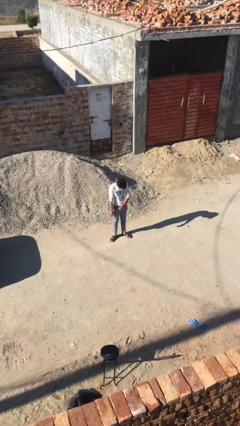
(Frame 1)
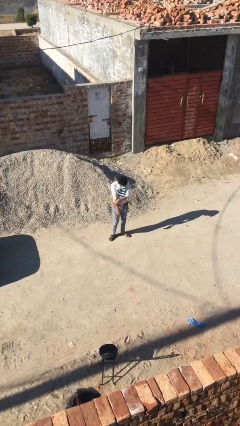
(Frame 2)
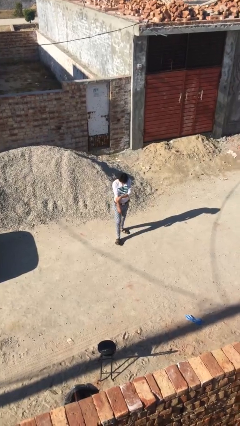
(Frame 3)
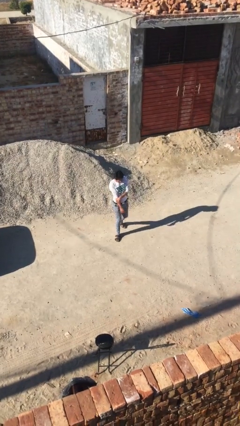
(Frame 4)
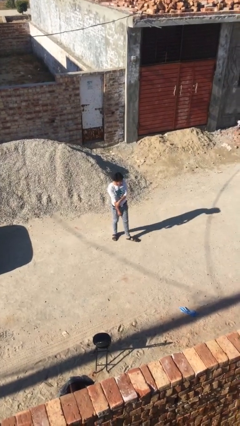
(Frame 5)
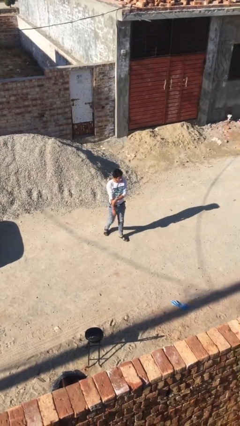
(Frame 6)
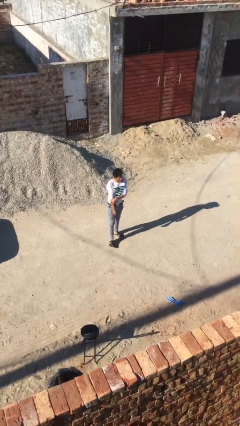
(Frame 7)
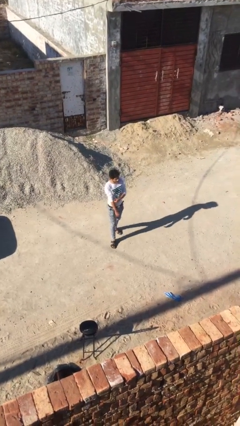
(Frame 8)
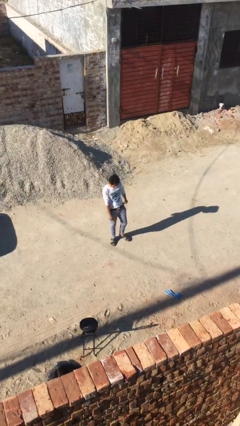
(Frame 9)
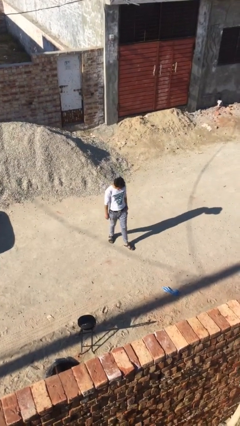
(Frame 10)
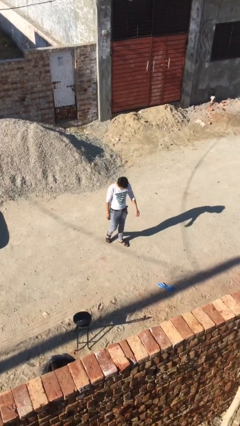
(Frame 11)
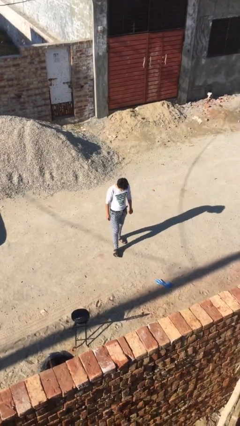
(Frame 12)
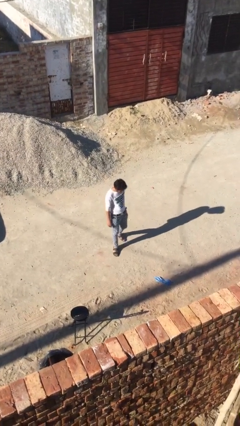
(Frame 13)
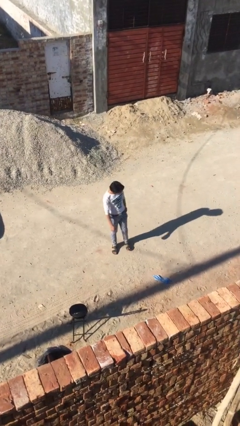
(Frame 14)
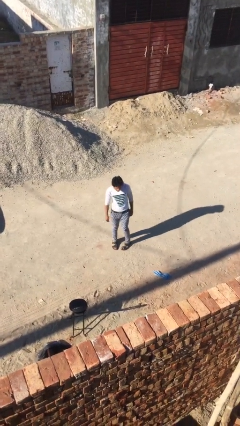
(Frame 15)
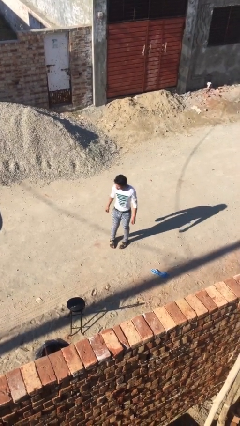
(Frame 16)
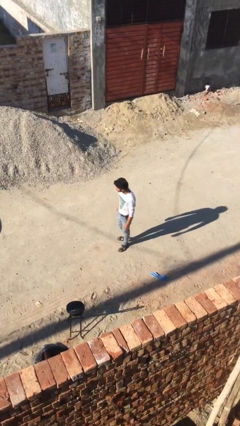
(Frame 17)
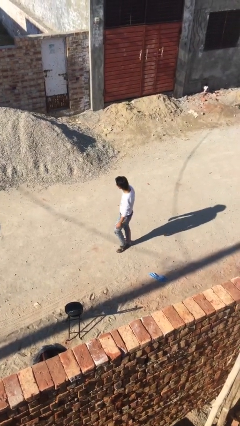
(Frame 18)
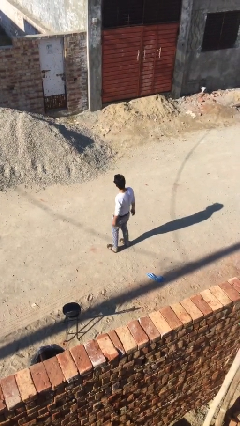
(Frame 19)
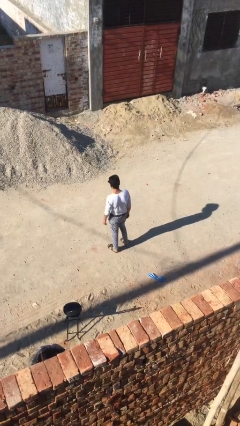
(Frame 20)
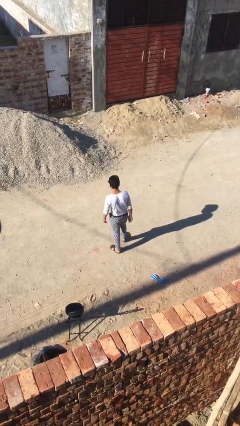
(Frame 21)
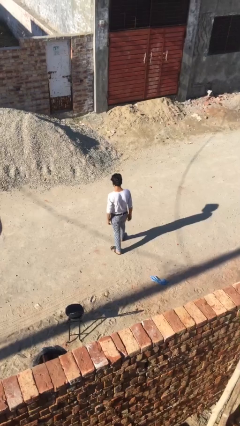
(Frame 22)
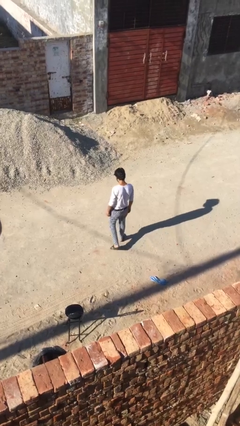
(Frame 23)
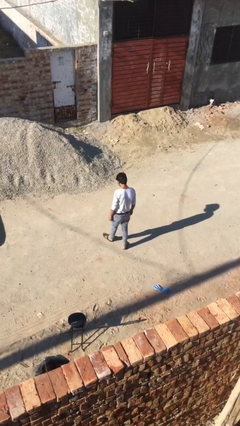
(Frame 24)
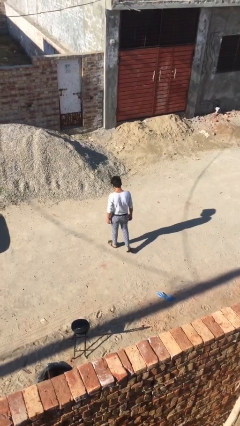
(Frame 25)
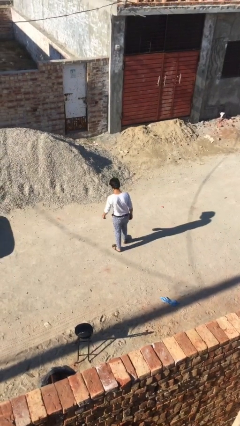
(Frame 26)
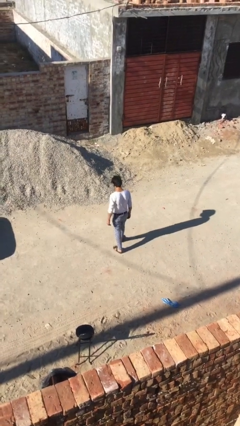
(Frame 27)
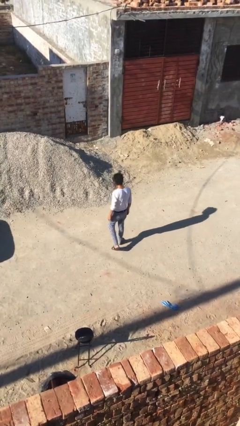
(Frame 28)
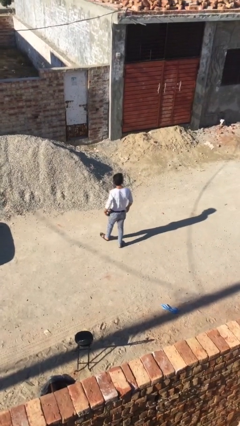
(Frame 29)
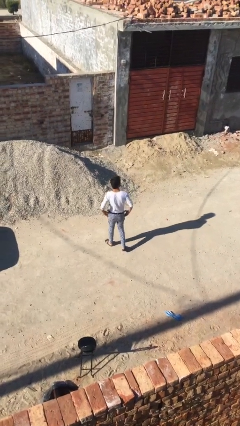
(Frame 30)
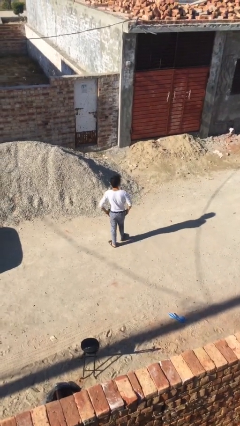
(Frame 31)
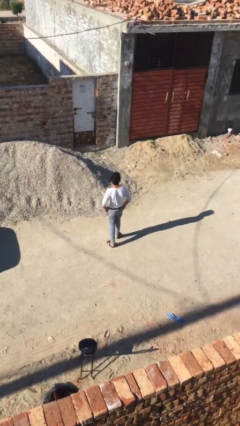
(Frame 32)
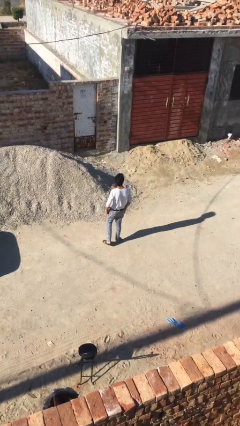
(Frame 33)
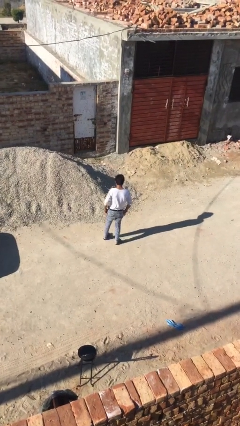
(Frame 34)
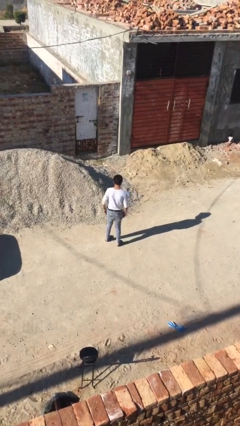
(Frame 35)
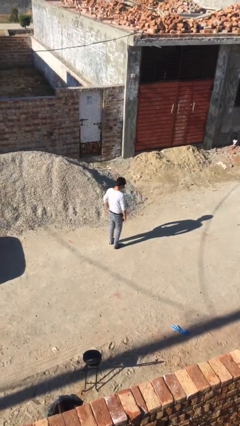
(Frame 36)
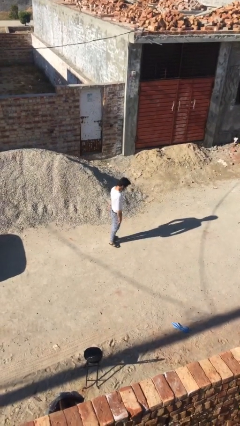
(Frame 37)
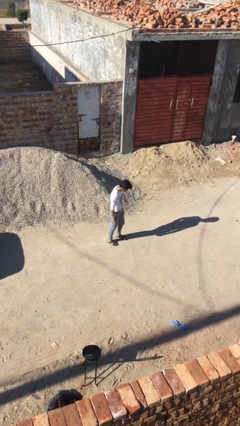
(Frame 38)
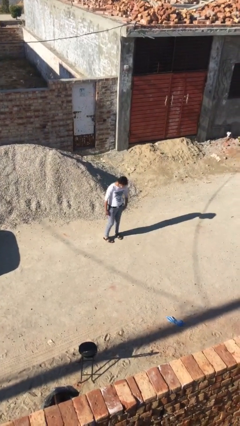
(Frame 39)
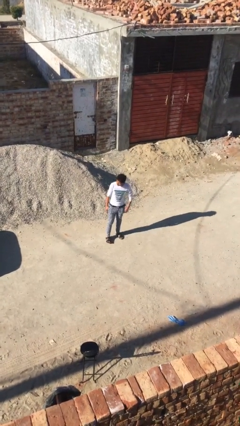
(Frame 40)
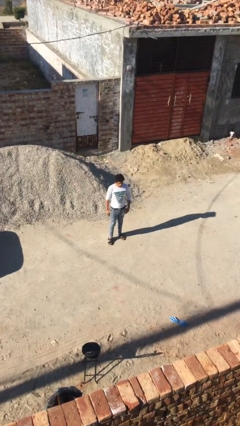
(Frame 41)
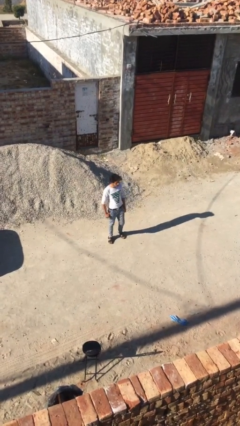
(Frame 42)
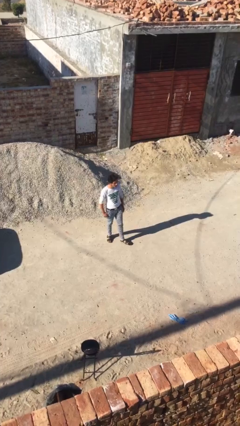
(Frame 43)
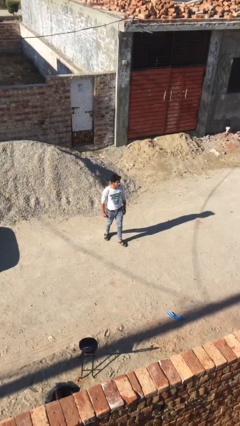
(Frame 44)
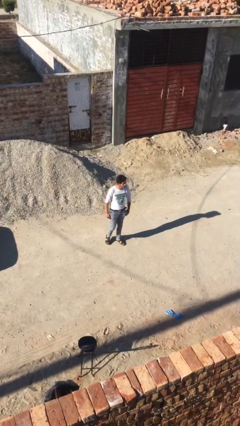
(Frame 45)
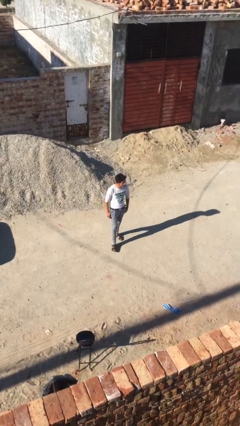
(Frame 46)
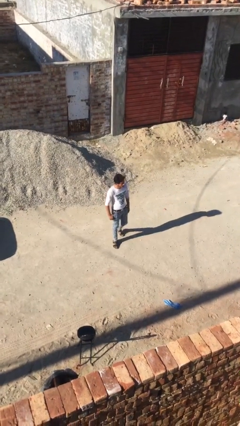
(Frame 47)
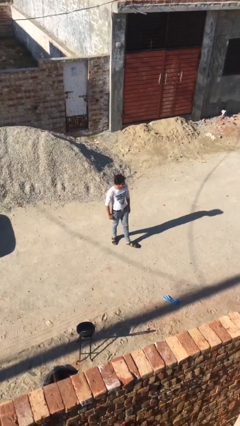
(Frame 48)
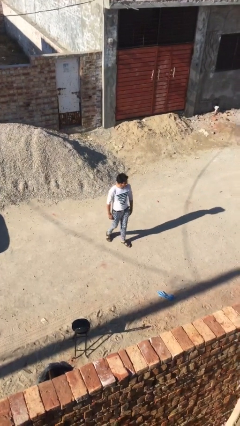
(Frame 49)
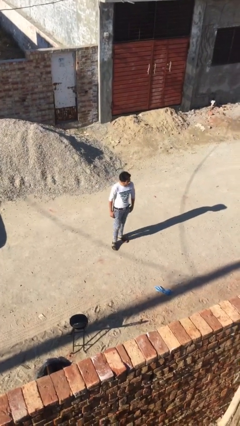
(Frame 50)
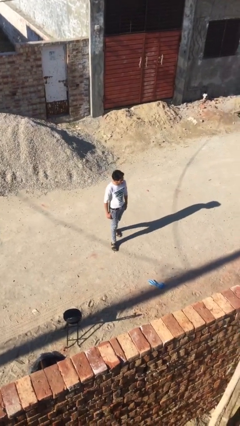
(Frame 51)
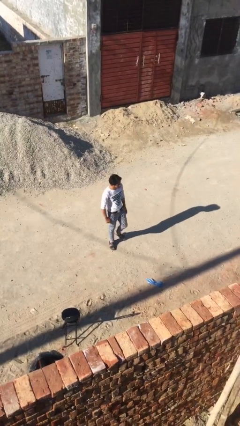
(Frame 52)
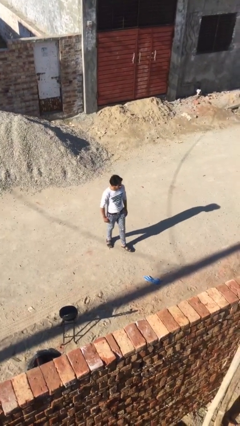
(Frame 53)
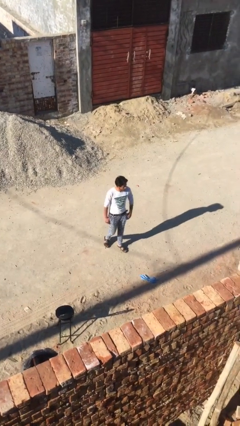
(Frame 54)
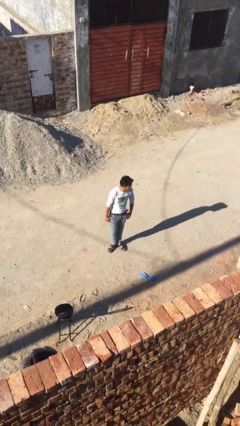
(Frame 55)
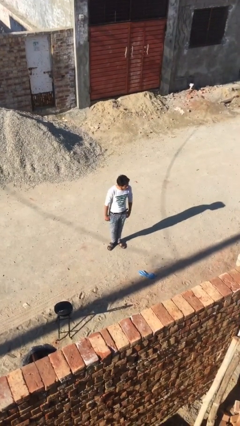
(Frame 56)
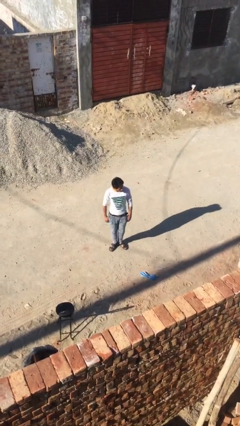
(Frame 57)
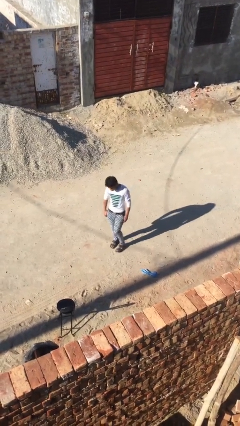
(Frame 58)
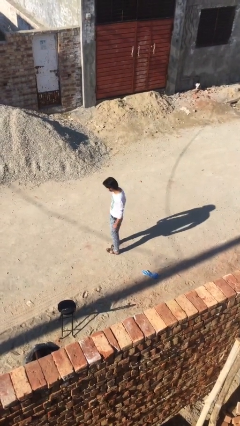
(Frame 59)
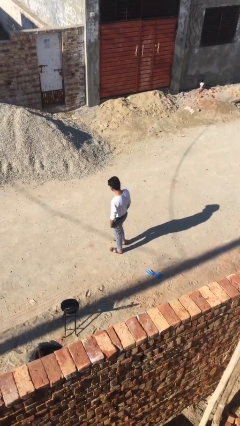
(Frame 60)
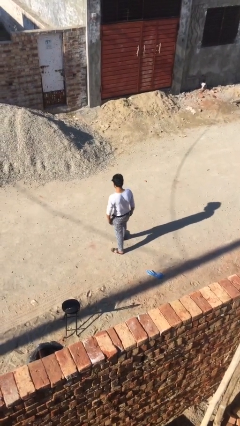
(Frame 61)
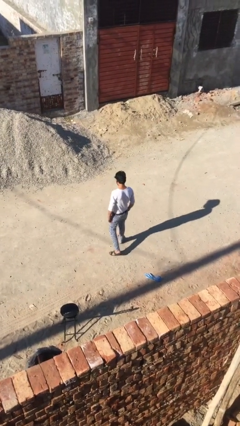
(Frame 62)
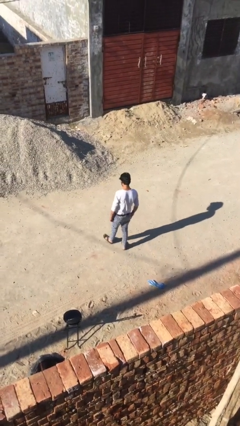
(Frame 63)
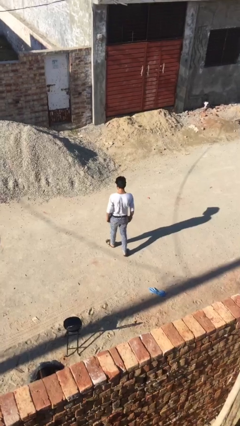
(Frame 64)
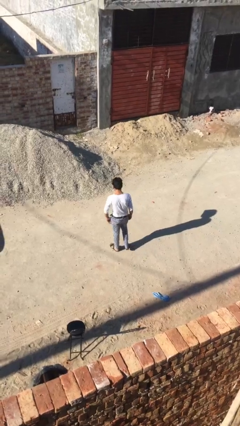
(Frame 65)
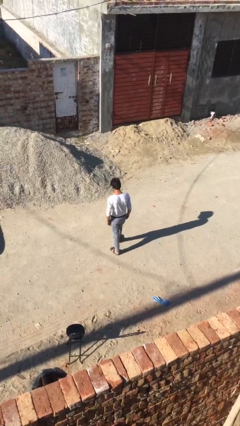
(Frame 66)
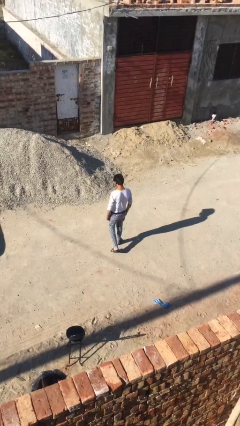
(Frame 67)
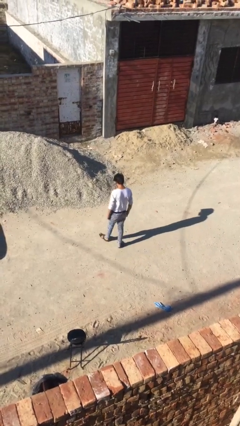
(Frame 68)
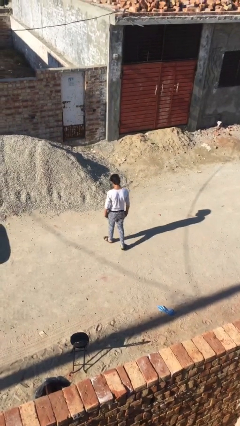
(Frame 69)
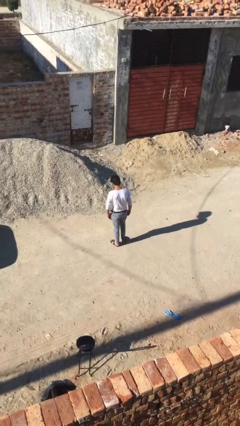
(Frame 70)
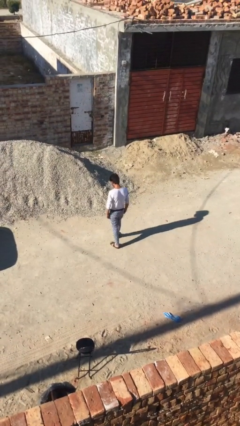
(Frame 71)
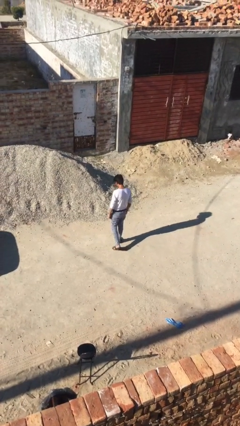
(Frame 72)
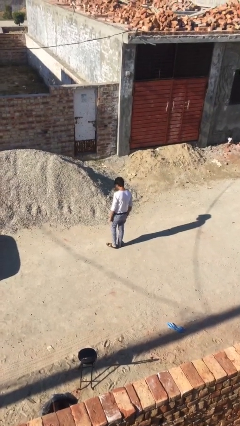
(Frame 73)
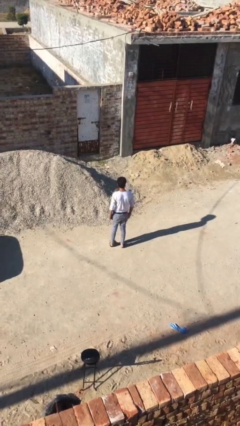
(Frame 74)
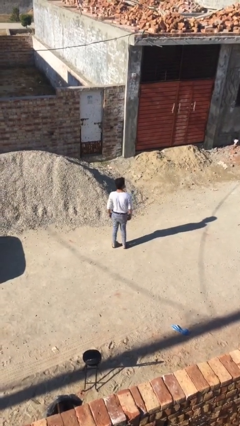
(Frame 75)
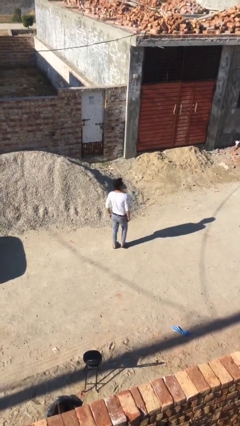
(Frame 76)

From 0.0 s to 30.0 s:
person walks

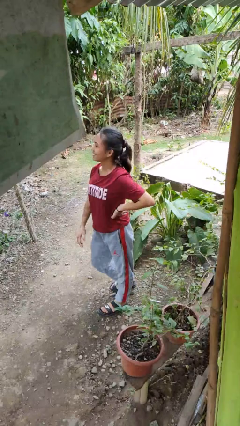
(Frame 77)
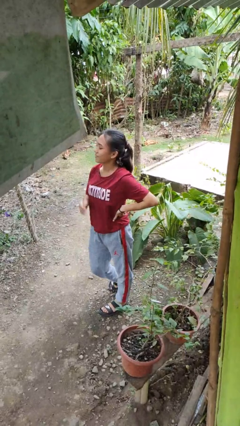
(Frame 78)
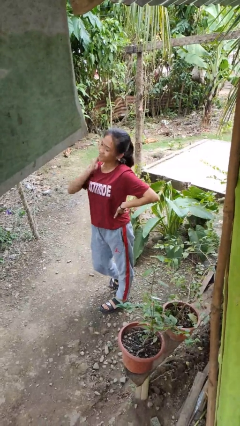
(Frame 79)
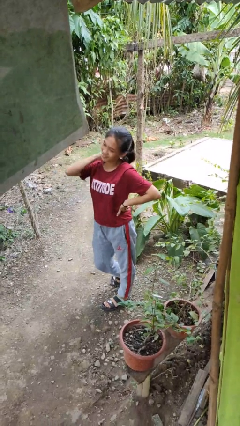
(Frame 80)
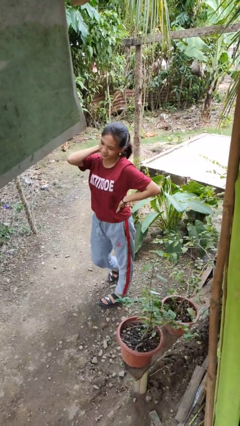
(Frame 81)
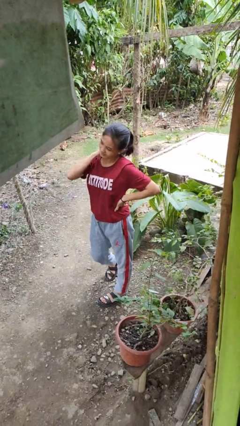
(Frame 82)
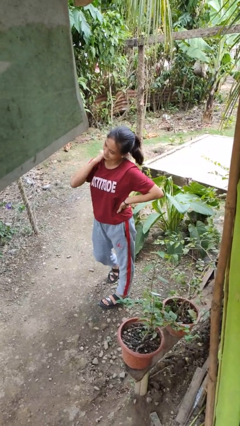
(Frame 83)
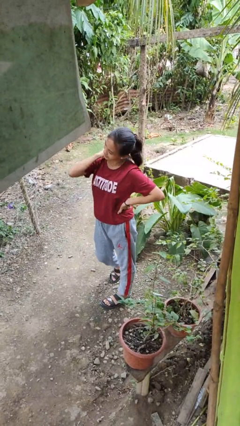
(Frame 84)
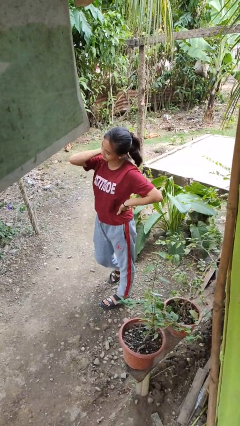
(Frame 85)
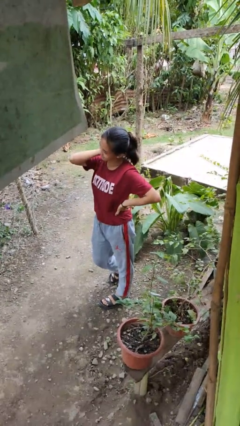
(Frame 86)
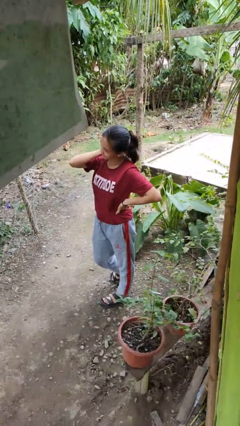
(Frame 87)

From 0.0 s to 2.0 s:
person rubs neck

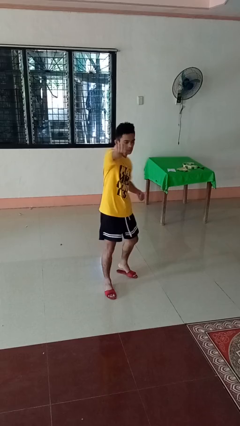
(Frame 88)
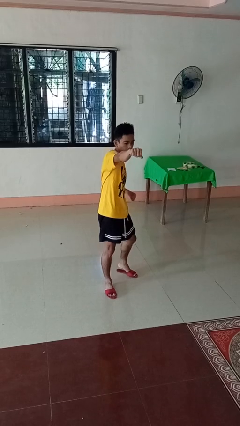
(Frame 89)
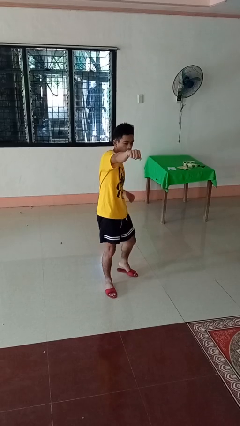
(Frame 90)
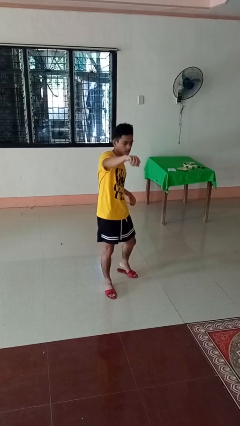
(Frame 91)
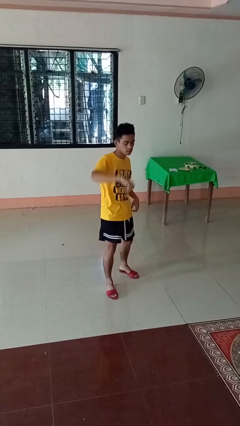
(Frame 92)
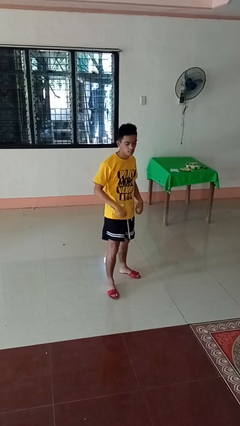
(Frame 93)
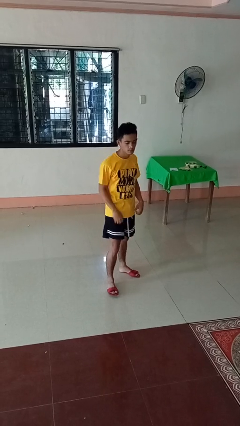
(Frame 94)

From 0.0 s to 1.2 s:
person punches
